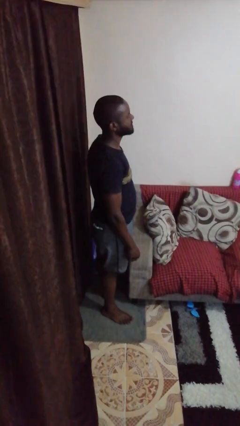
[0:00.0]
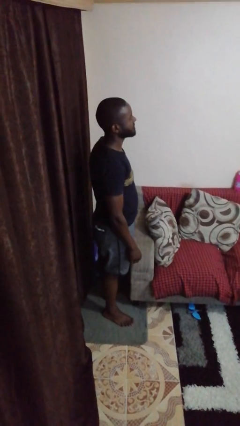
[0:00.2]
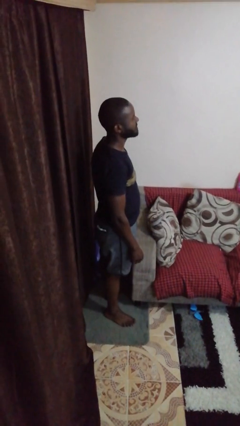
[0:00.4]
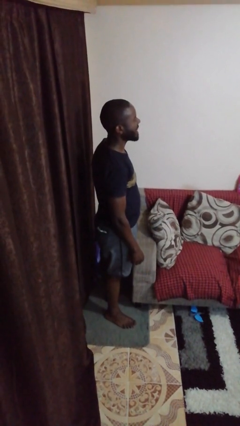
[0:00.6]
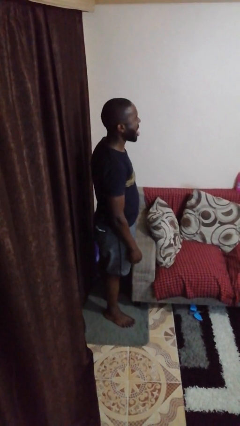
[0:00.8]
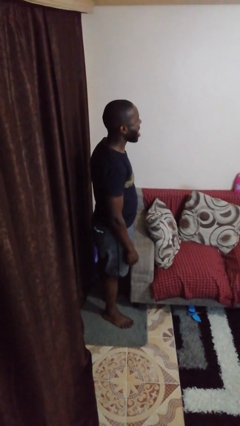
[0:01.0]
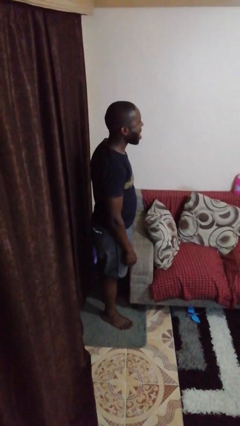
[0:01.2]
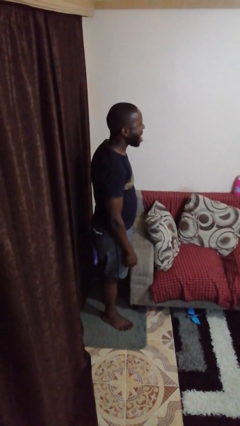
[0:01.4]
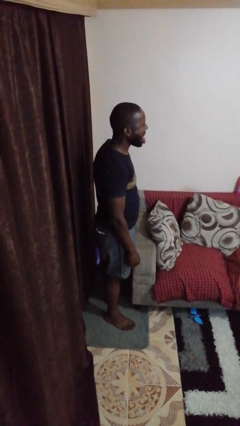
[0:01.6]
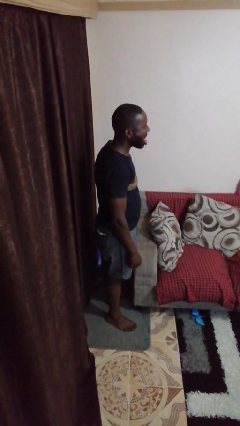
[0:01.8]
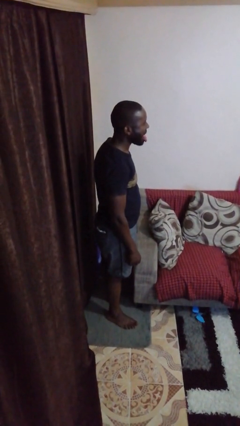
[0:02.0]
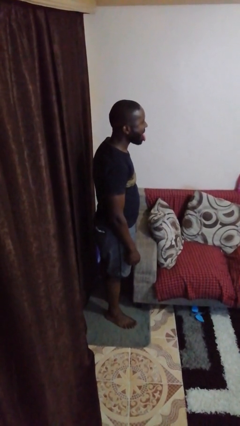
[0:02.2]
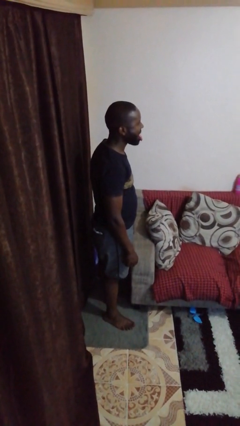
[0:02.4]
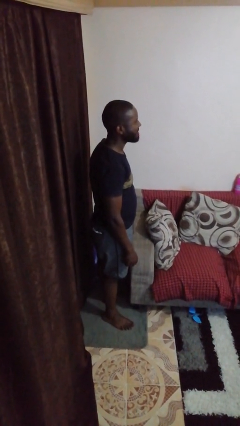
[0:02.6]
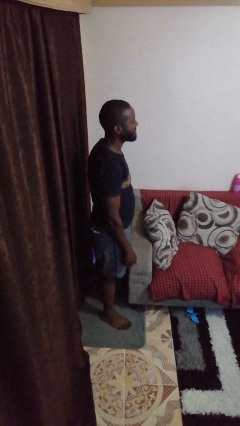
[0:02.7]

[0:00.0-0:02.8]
person sticks out tongue

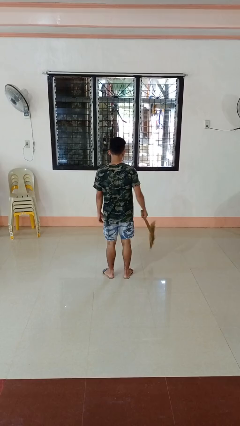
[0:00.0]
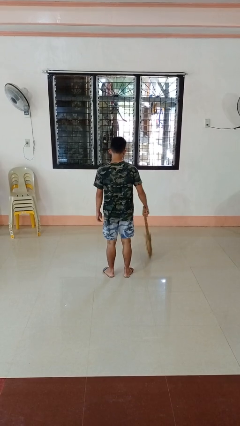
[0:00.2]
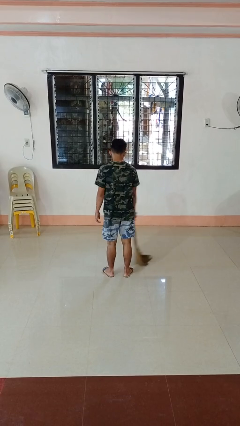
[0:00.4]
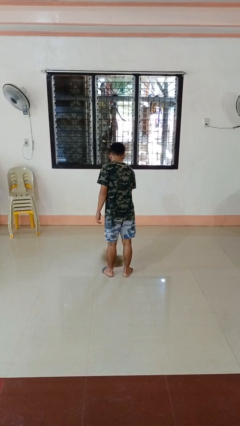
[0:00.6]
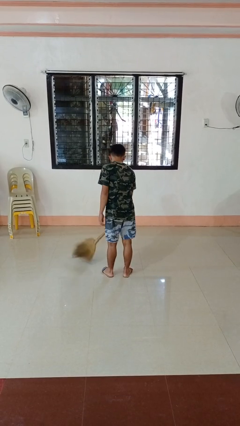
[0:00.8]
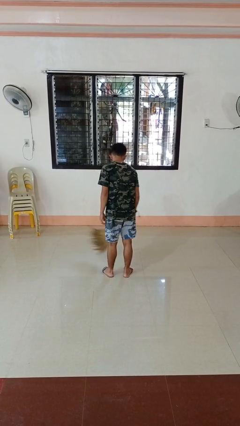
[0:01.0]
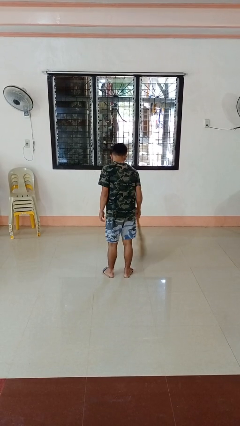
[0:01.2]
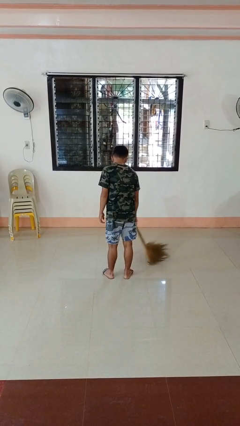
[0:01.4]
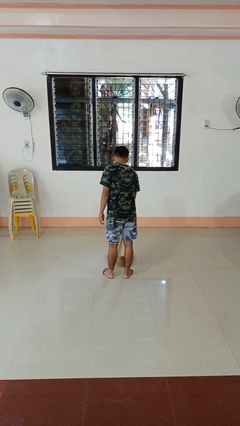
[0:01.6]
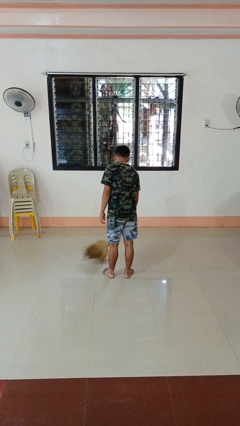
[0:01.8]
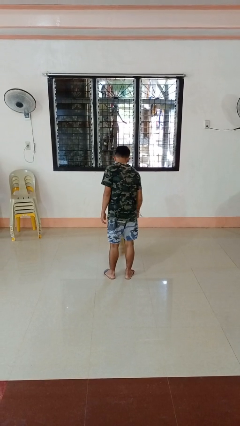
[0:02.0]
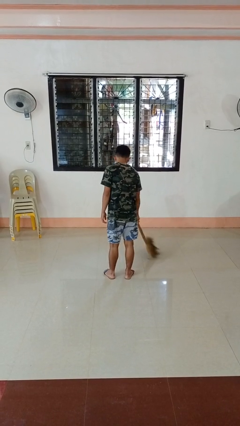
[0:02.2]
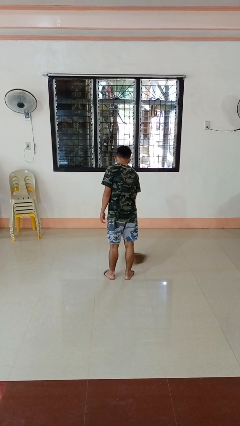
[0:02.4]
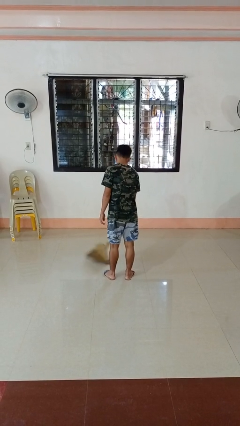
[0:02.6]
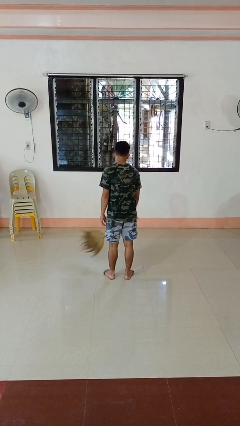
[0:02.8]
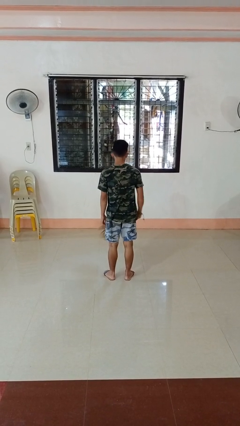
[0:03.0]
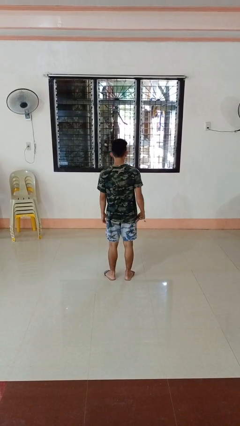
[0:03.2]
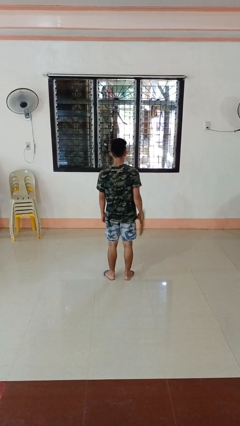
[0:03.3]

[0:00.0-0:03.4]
person sweeps floor

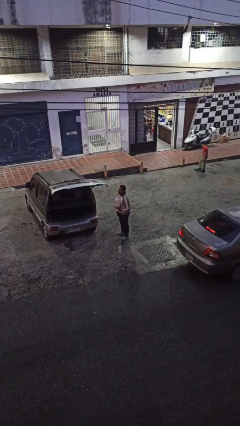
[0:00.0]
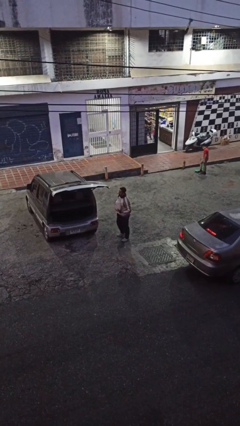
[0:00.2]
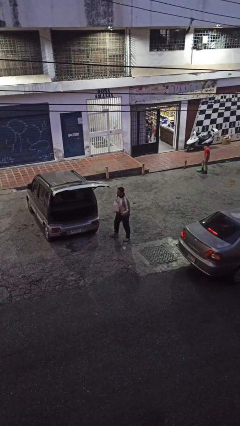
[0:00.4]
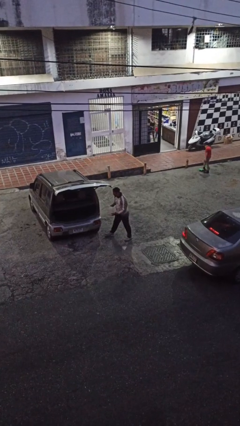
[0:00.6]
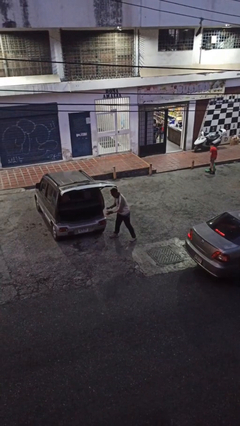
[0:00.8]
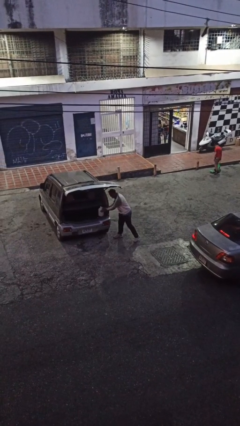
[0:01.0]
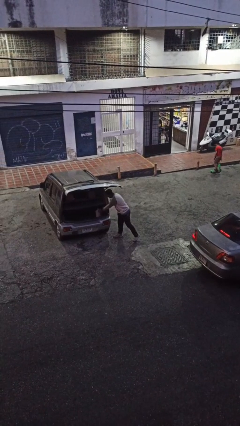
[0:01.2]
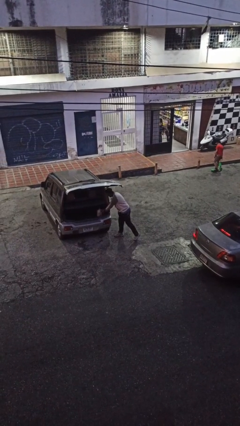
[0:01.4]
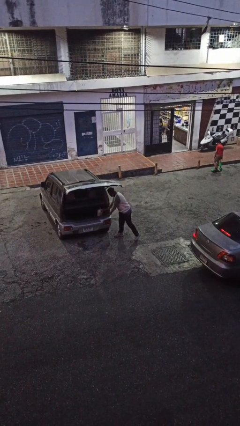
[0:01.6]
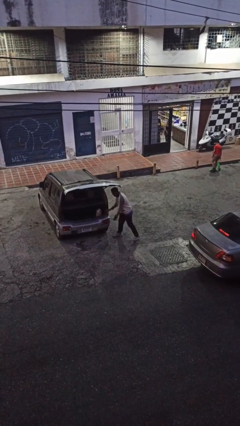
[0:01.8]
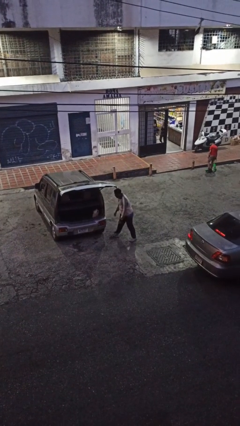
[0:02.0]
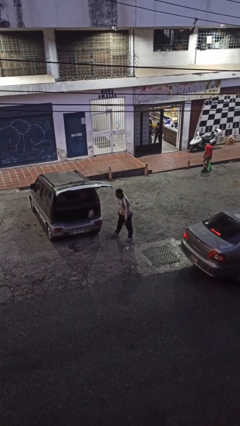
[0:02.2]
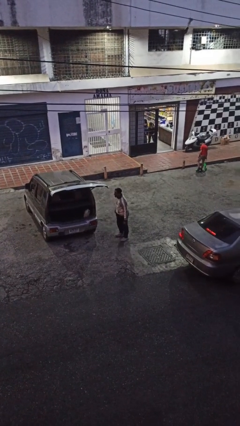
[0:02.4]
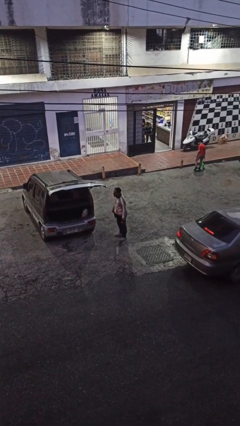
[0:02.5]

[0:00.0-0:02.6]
person loads car

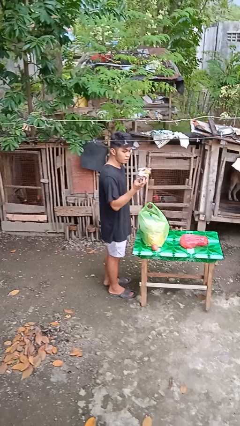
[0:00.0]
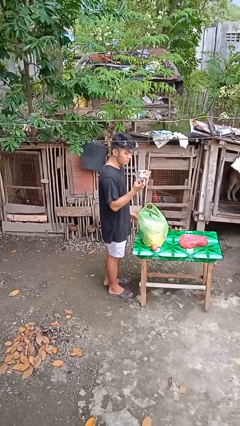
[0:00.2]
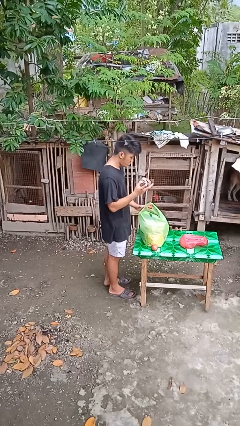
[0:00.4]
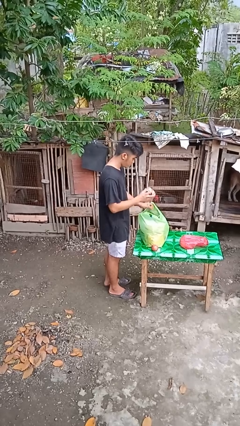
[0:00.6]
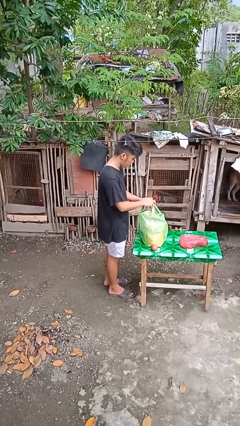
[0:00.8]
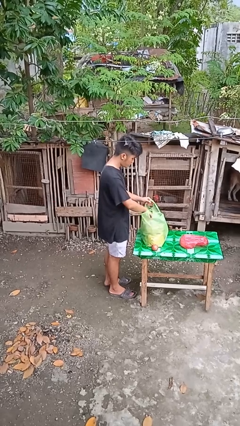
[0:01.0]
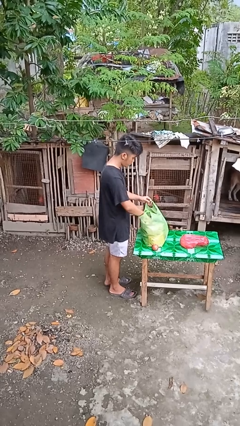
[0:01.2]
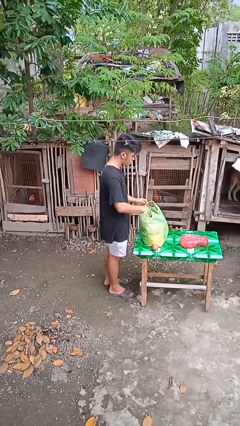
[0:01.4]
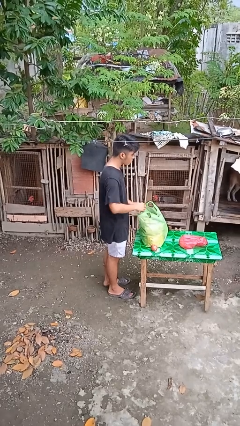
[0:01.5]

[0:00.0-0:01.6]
person puts object into bag

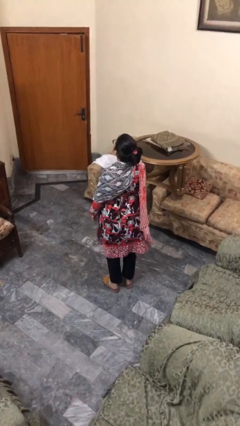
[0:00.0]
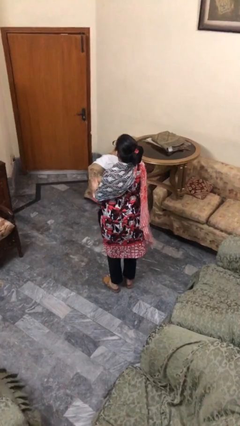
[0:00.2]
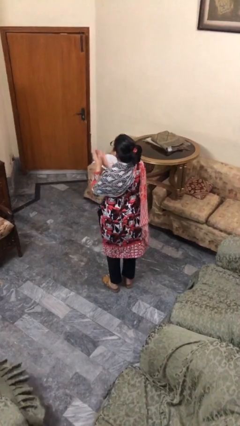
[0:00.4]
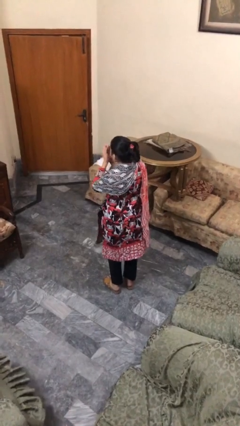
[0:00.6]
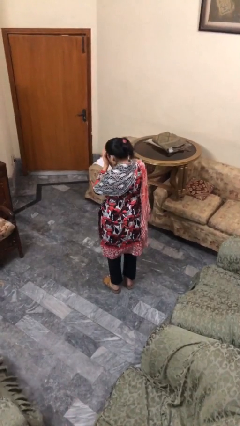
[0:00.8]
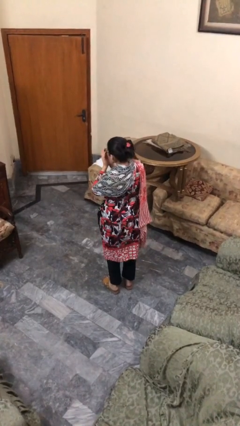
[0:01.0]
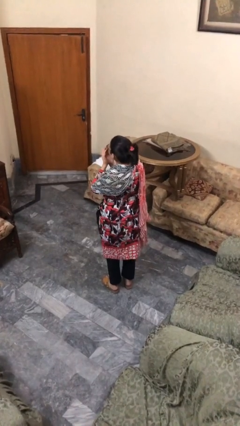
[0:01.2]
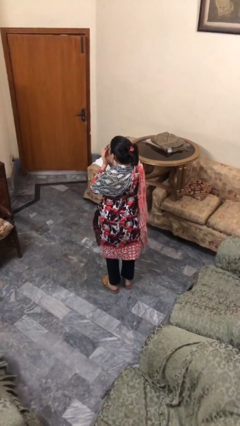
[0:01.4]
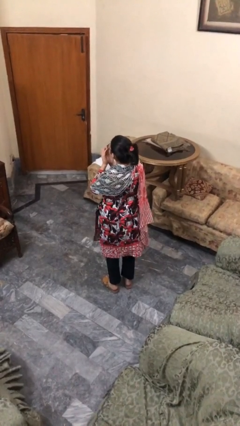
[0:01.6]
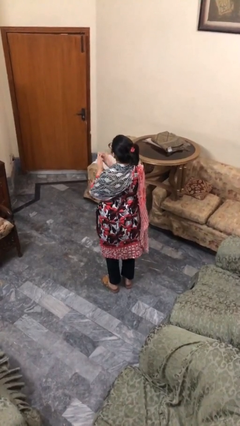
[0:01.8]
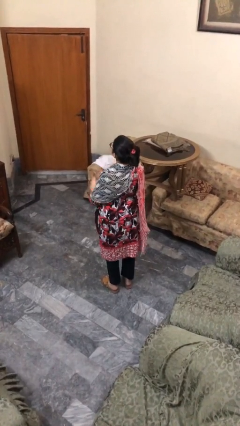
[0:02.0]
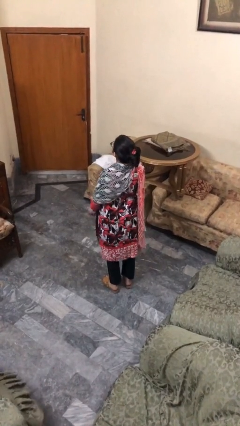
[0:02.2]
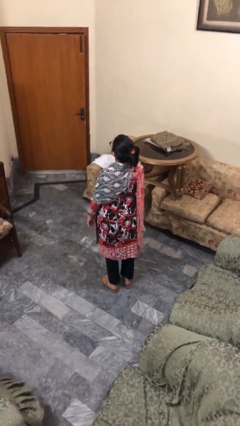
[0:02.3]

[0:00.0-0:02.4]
person sneezes into hand

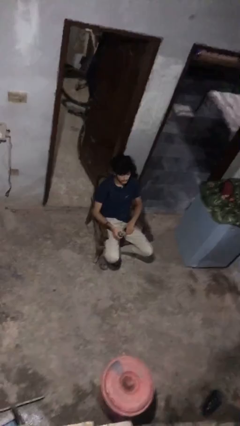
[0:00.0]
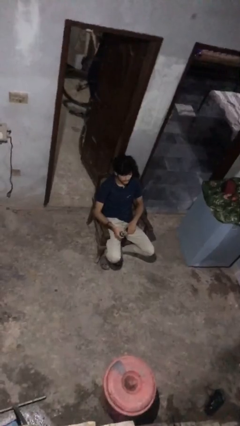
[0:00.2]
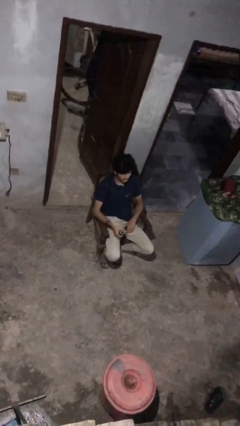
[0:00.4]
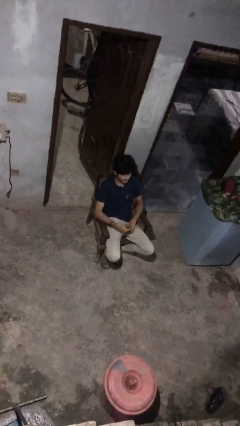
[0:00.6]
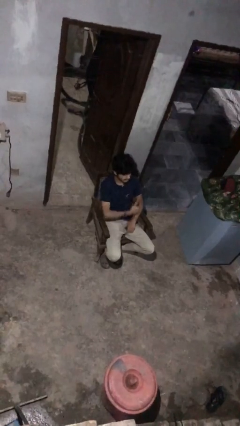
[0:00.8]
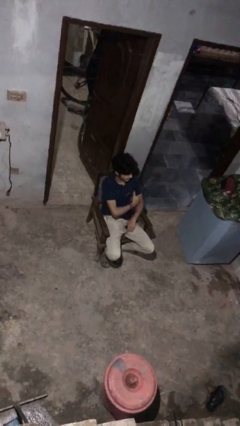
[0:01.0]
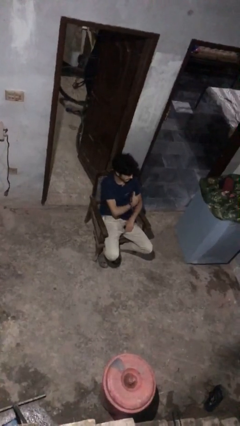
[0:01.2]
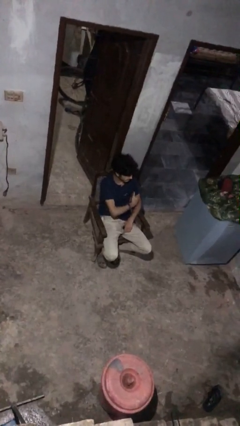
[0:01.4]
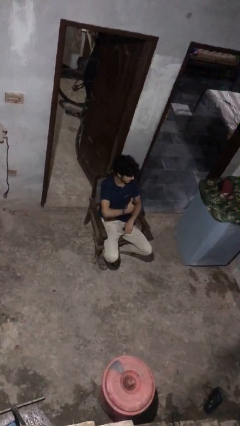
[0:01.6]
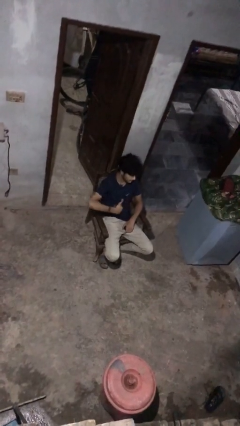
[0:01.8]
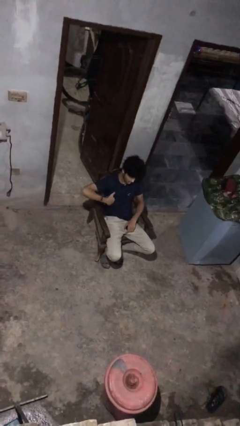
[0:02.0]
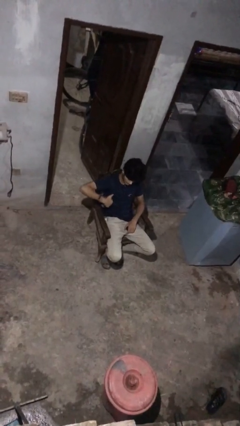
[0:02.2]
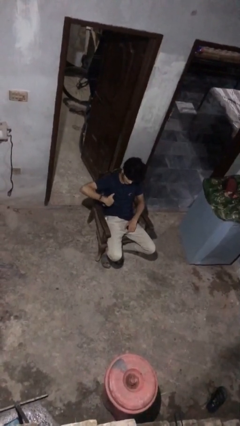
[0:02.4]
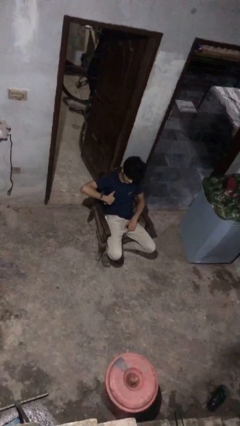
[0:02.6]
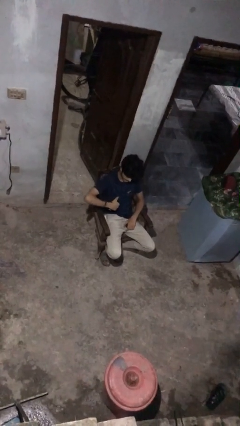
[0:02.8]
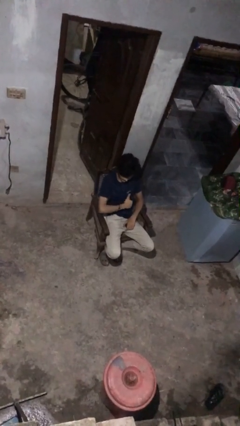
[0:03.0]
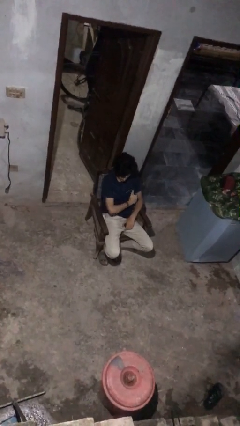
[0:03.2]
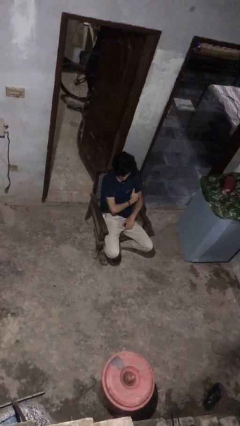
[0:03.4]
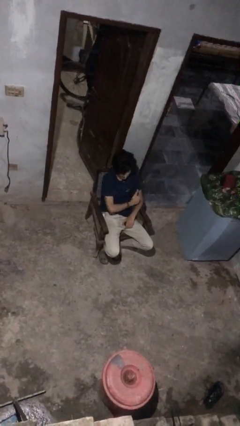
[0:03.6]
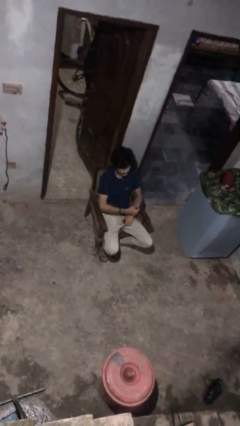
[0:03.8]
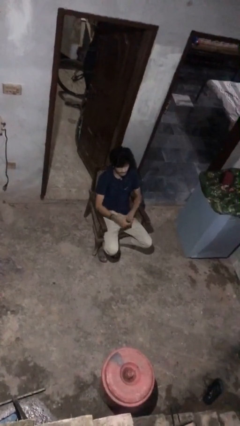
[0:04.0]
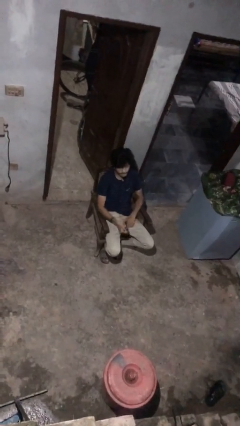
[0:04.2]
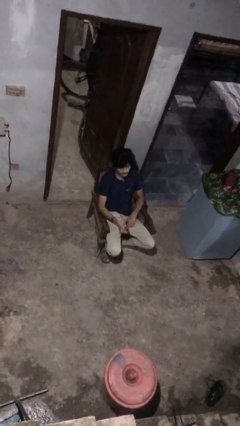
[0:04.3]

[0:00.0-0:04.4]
person applies deodorant
